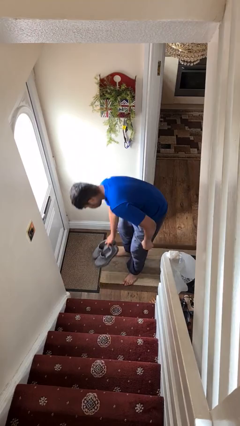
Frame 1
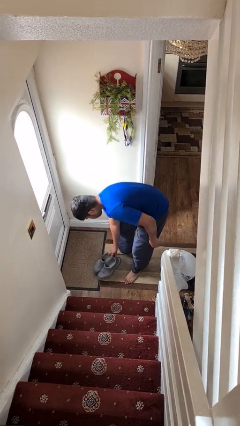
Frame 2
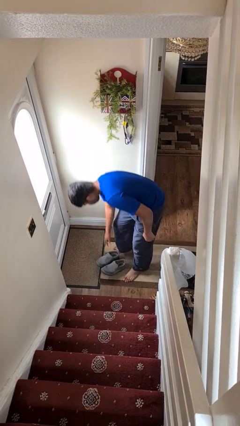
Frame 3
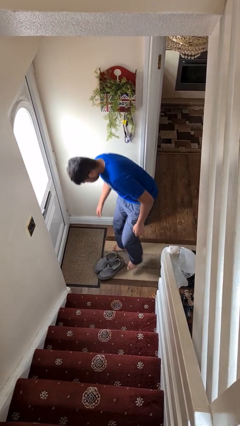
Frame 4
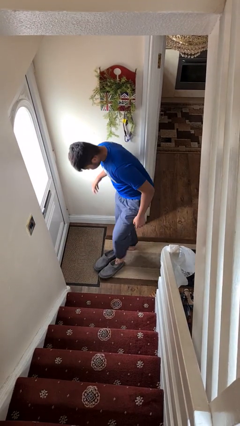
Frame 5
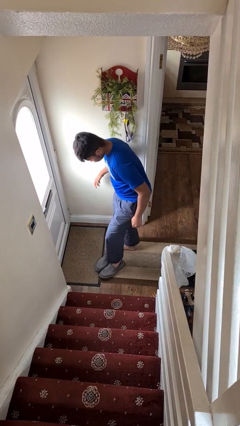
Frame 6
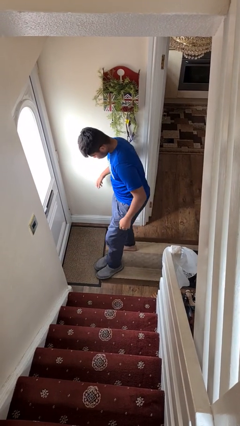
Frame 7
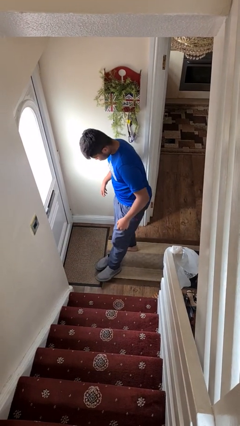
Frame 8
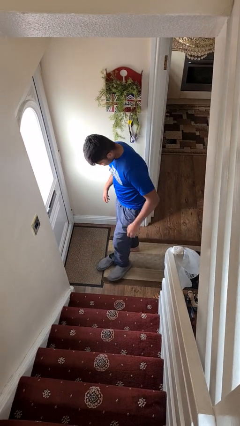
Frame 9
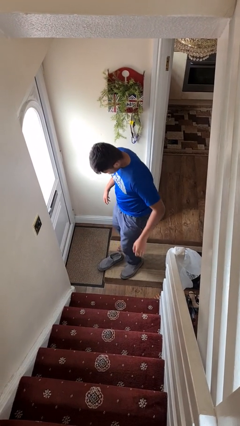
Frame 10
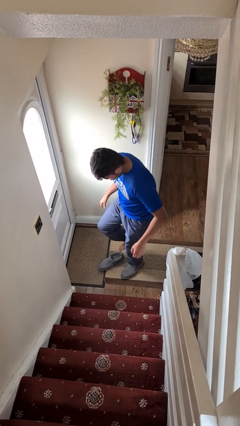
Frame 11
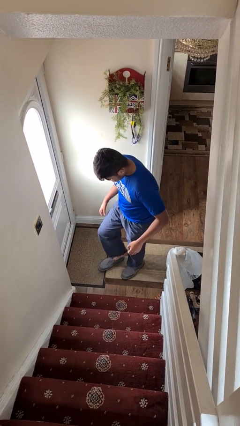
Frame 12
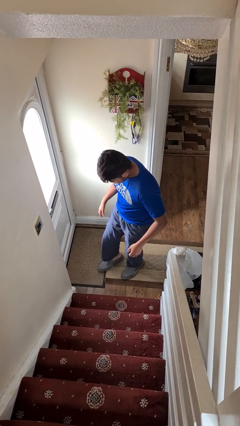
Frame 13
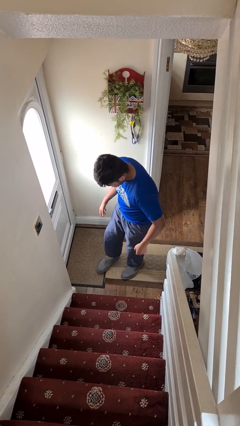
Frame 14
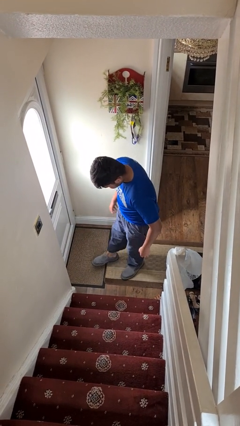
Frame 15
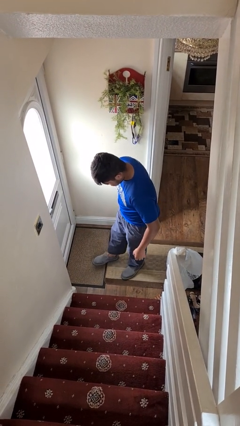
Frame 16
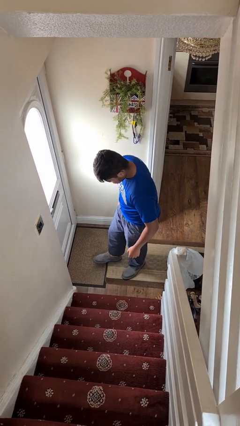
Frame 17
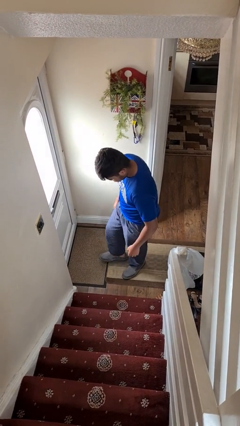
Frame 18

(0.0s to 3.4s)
person puts on shoes

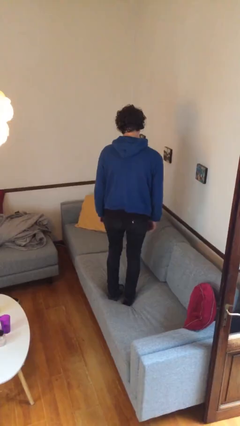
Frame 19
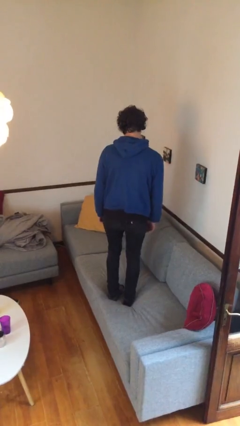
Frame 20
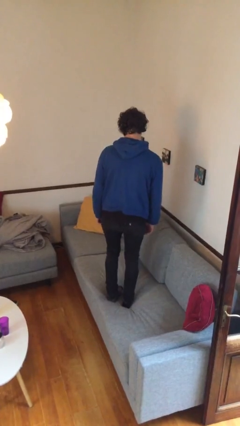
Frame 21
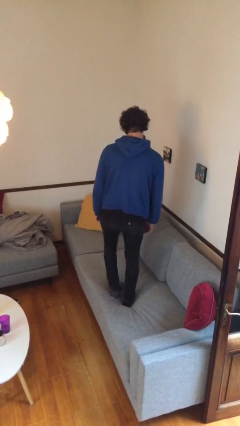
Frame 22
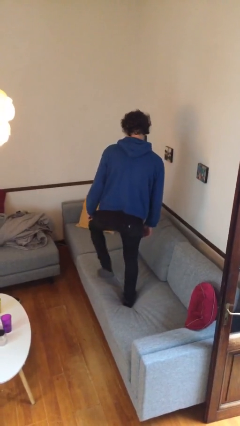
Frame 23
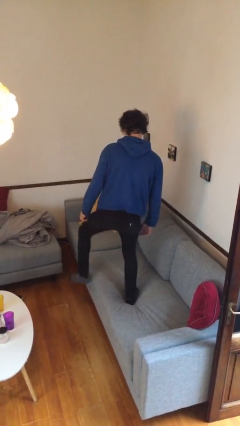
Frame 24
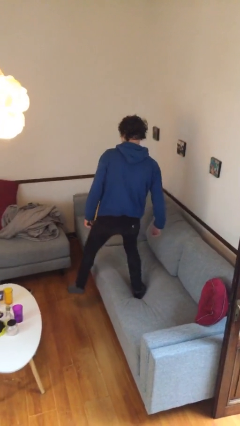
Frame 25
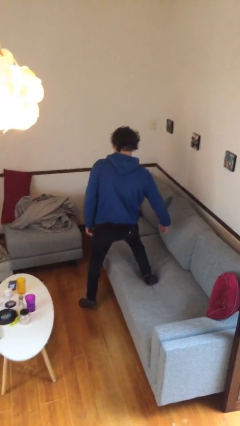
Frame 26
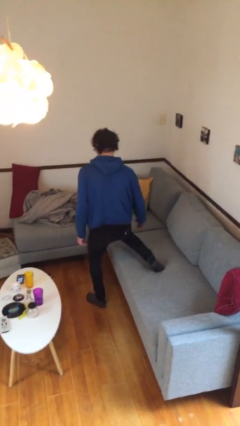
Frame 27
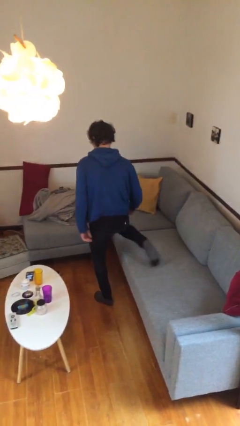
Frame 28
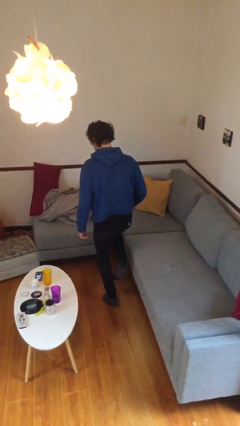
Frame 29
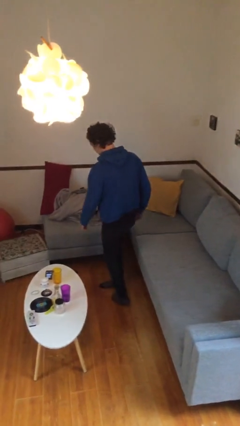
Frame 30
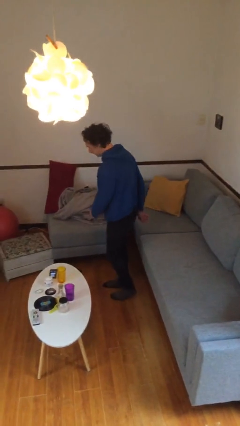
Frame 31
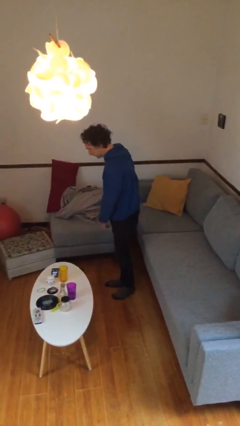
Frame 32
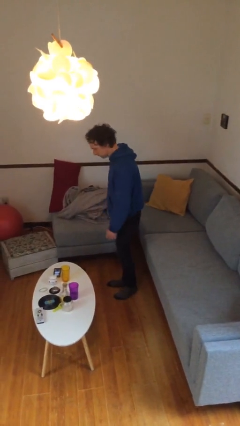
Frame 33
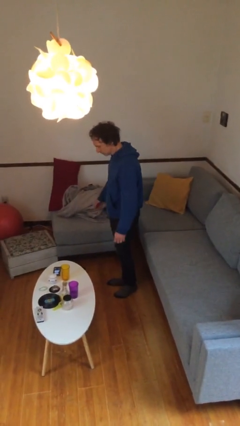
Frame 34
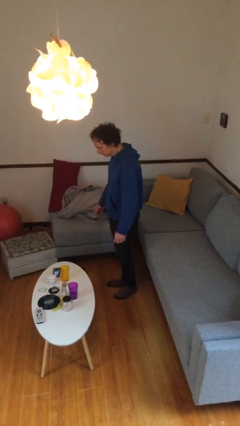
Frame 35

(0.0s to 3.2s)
person climbs off couch

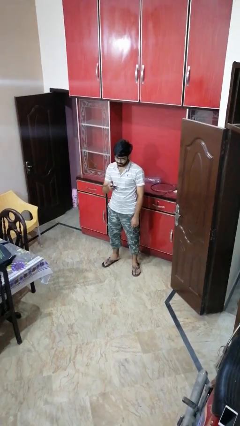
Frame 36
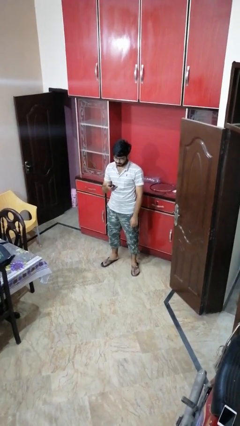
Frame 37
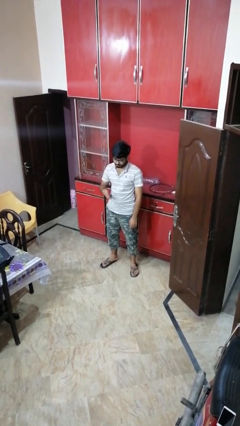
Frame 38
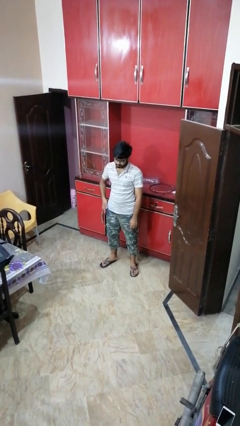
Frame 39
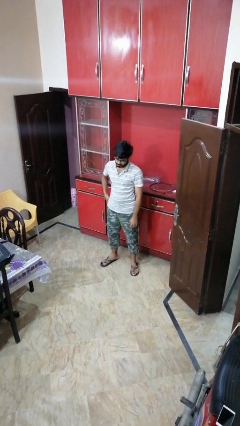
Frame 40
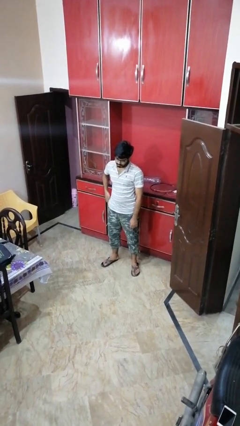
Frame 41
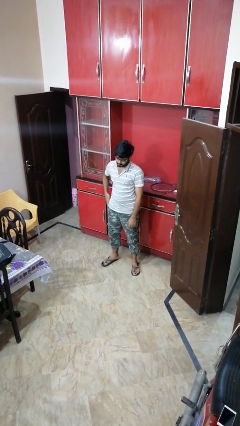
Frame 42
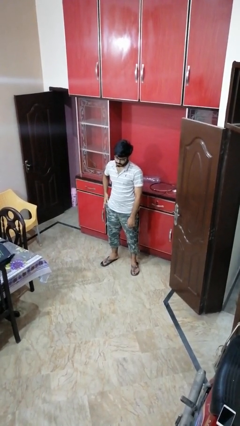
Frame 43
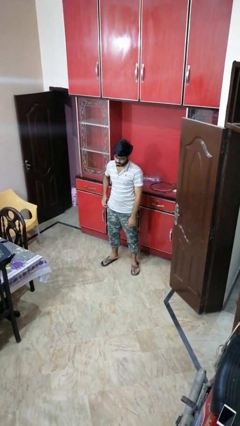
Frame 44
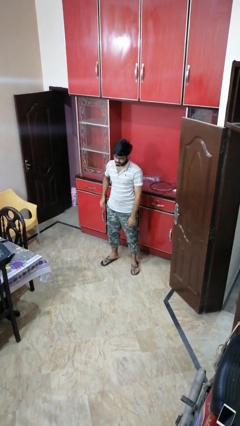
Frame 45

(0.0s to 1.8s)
person puts phone into pocket

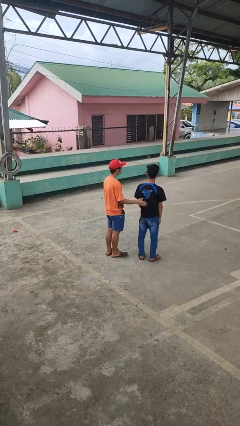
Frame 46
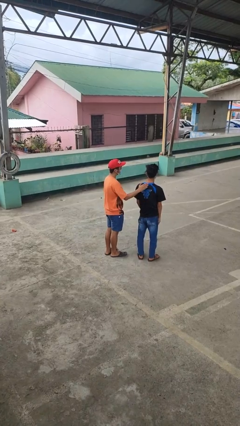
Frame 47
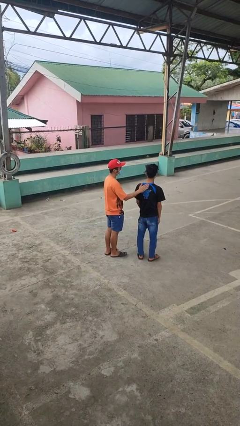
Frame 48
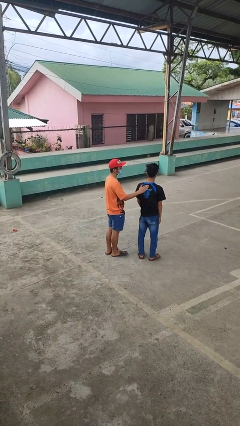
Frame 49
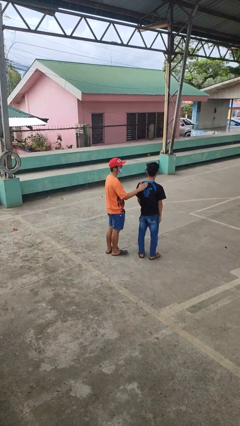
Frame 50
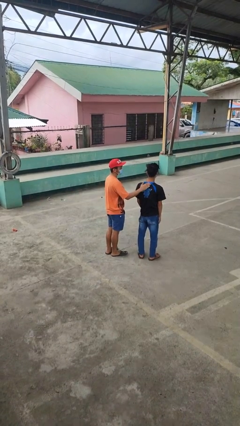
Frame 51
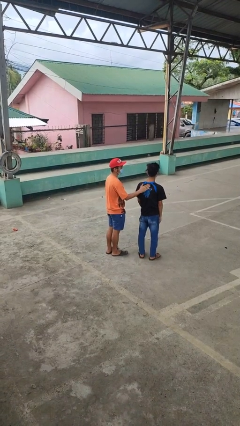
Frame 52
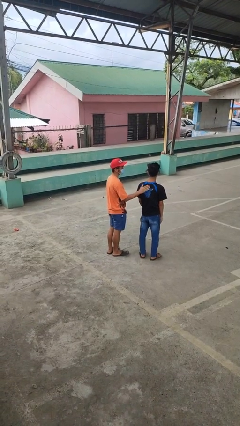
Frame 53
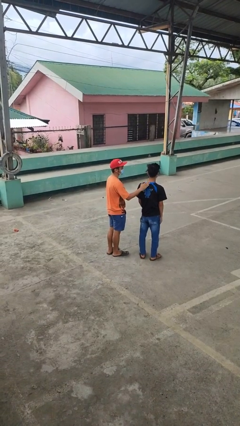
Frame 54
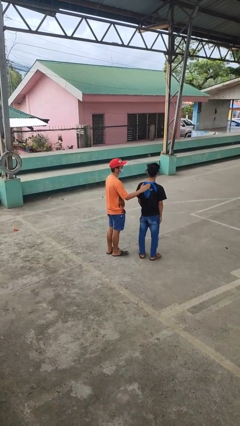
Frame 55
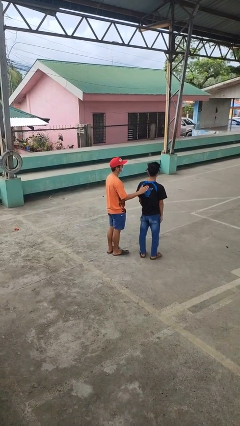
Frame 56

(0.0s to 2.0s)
person touches back of person

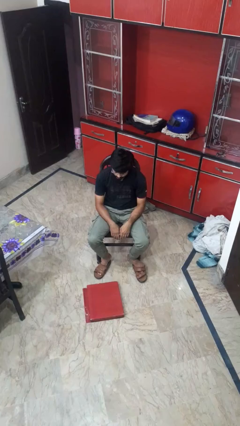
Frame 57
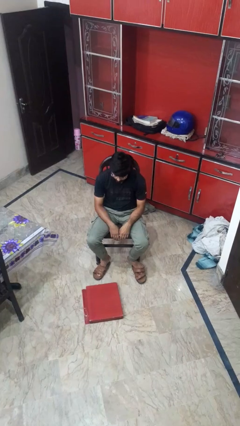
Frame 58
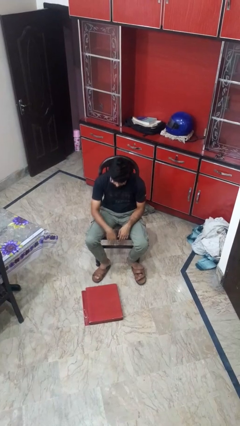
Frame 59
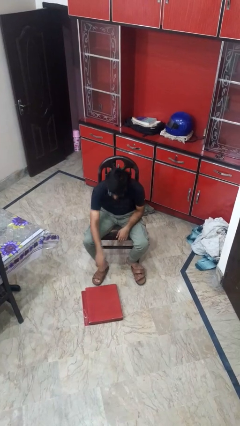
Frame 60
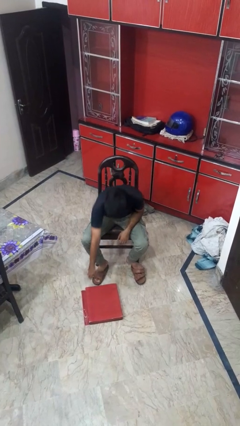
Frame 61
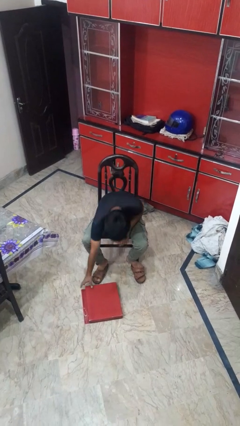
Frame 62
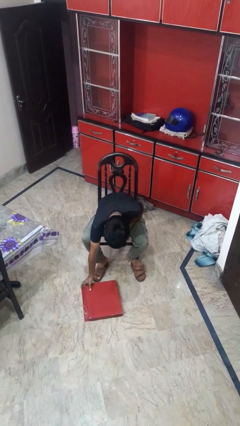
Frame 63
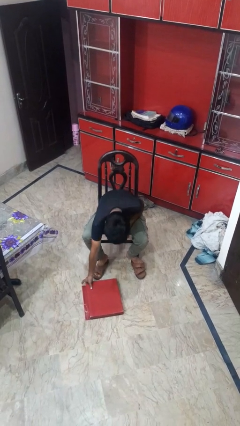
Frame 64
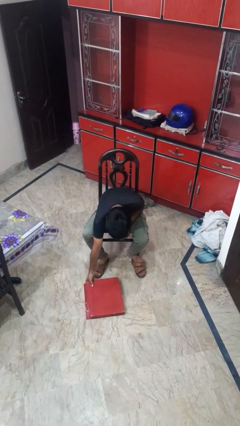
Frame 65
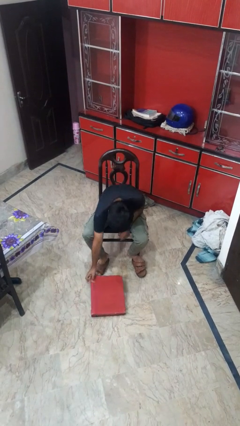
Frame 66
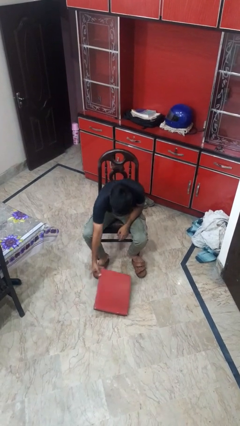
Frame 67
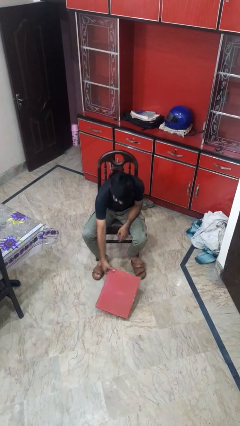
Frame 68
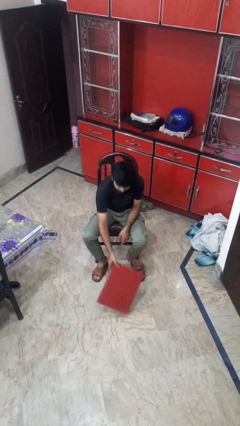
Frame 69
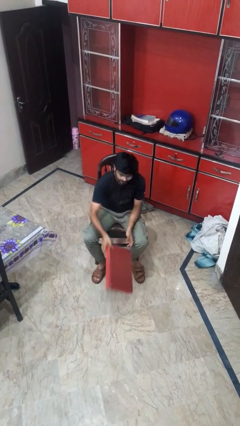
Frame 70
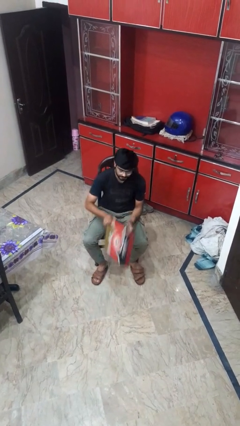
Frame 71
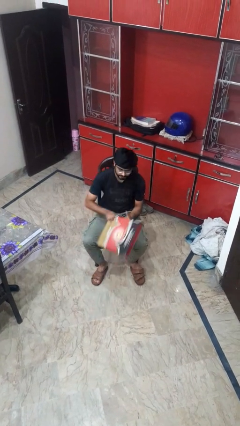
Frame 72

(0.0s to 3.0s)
person picks up object from floor

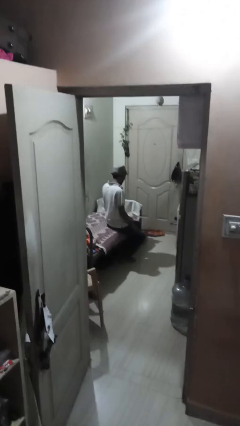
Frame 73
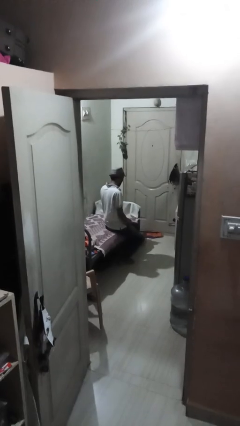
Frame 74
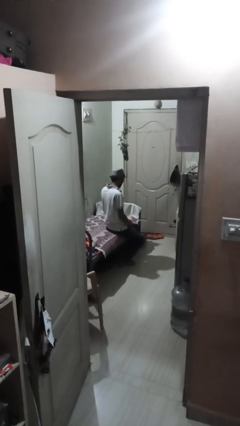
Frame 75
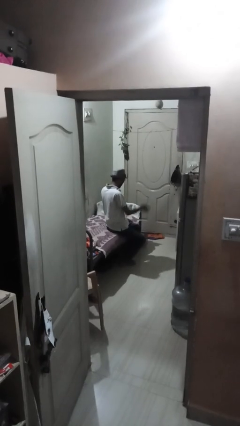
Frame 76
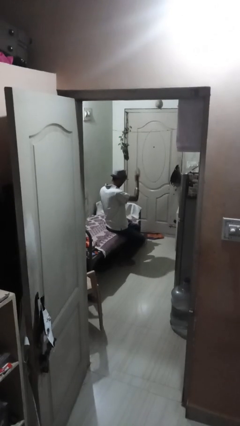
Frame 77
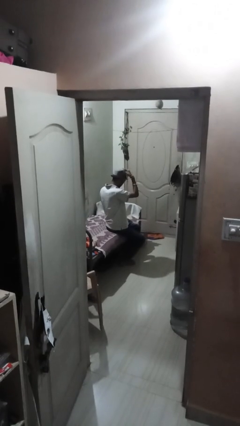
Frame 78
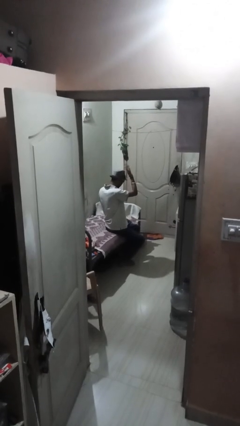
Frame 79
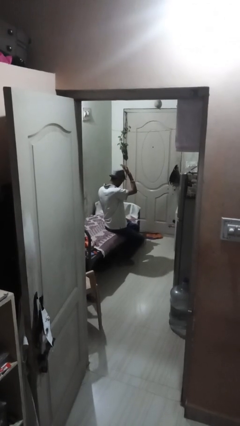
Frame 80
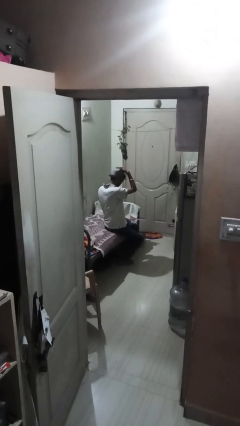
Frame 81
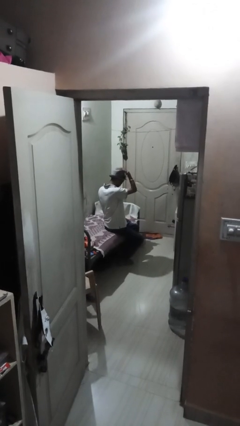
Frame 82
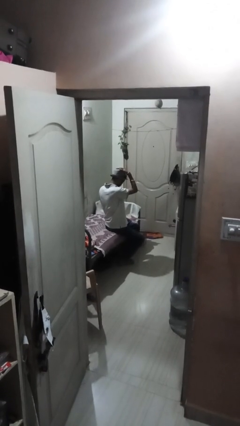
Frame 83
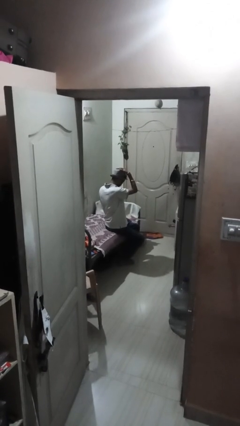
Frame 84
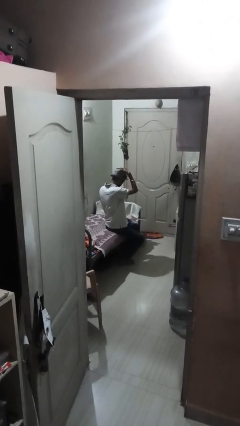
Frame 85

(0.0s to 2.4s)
person pats head

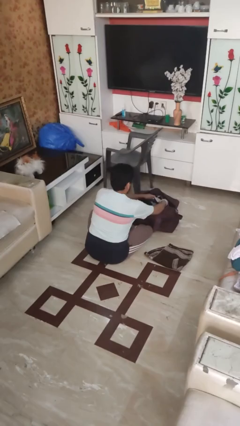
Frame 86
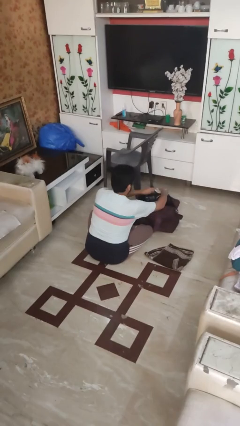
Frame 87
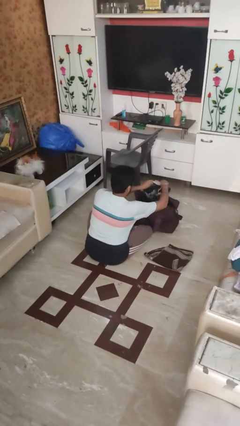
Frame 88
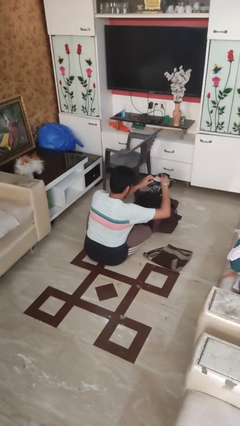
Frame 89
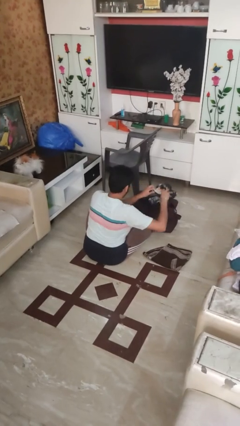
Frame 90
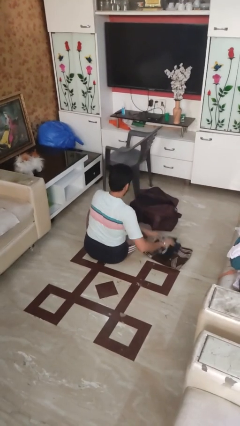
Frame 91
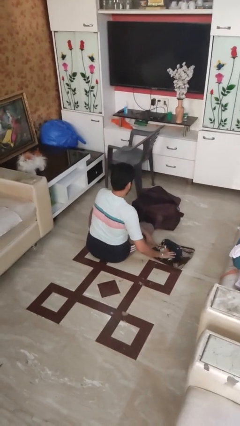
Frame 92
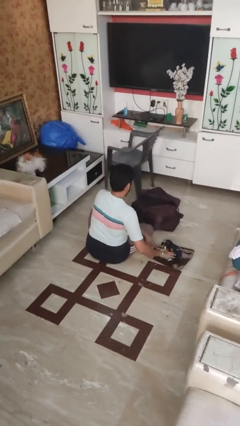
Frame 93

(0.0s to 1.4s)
person unloads clothes from suitcase
